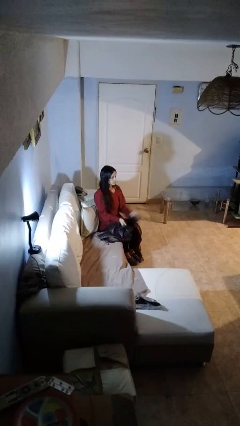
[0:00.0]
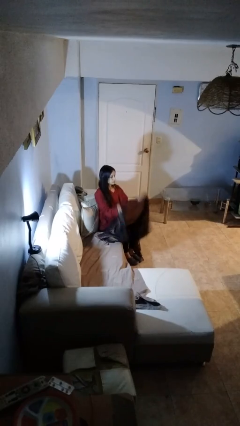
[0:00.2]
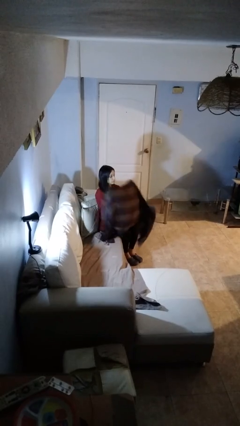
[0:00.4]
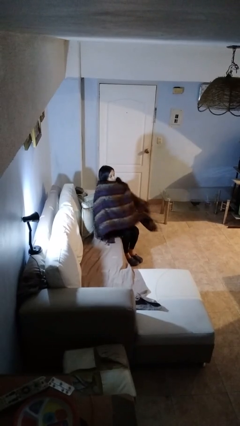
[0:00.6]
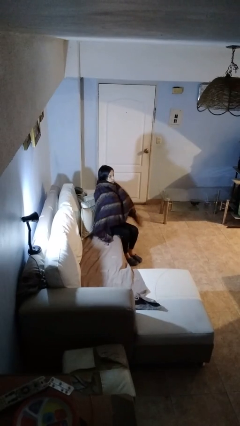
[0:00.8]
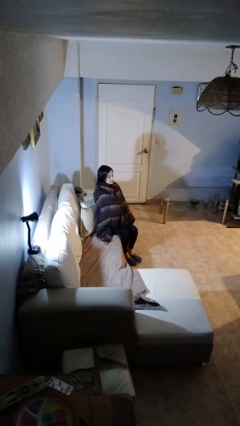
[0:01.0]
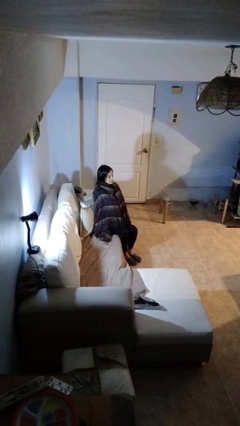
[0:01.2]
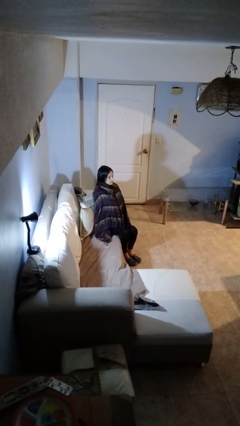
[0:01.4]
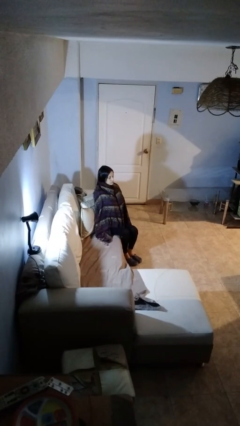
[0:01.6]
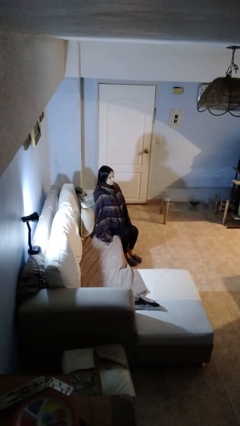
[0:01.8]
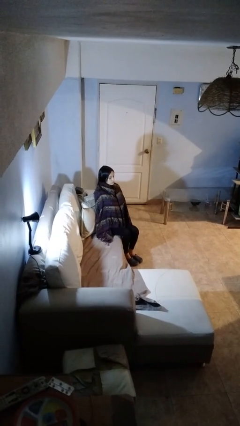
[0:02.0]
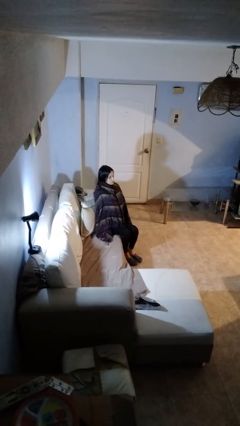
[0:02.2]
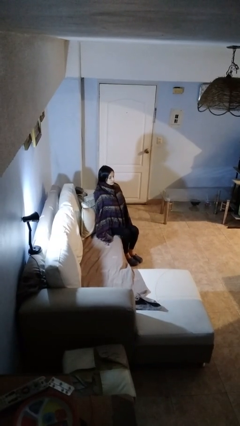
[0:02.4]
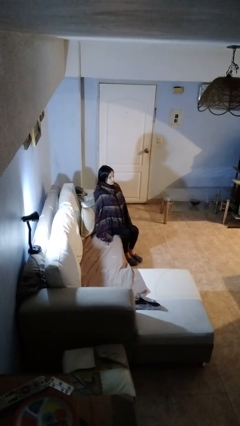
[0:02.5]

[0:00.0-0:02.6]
person covers with blanket

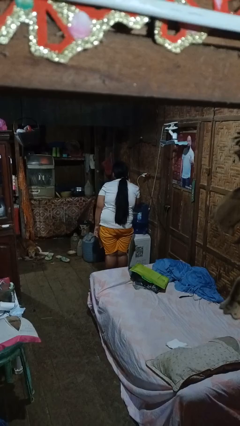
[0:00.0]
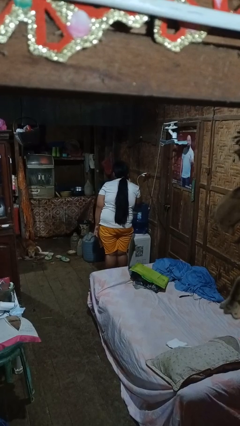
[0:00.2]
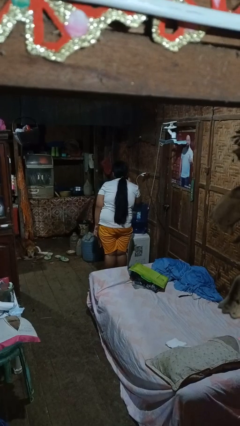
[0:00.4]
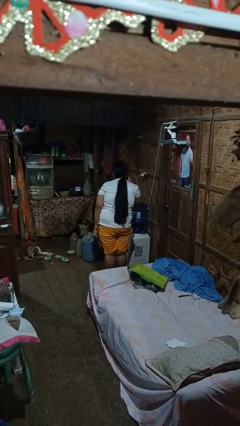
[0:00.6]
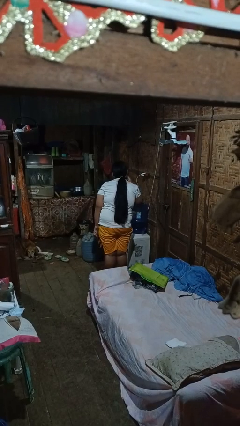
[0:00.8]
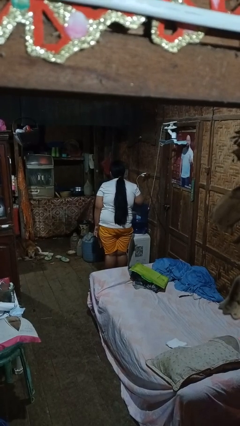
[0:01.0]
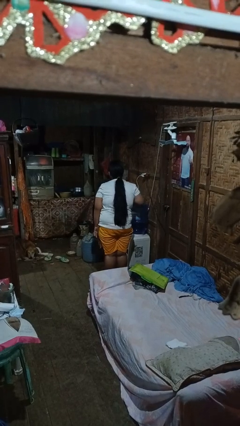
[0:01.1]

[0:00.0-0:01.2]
person gestures listen closely

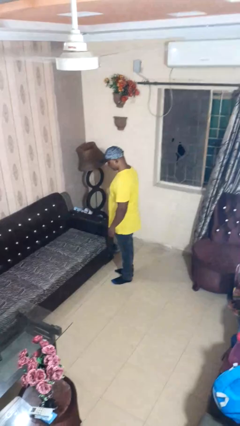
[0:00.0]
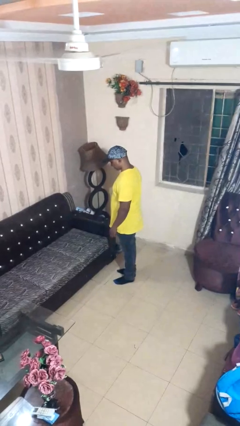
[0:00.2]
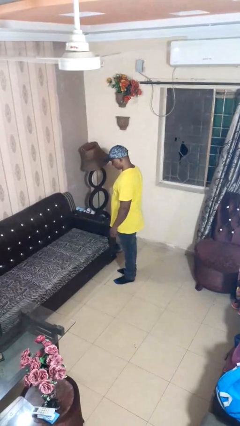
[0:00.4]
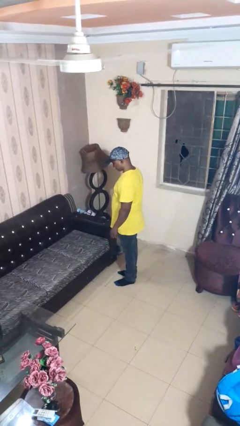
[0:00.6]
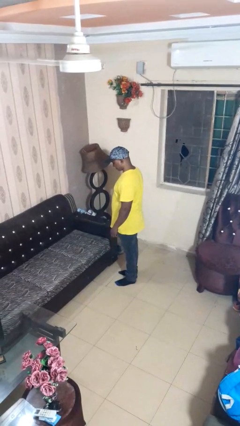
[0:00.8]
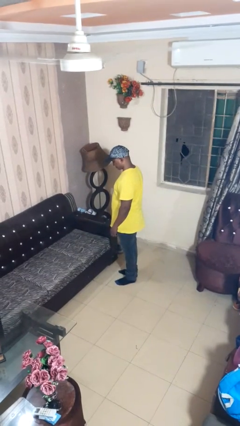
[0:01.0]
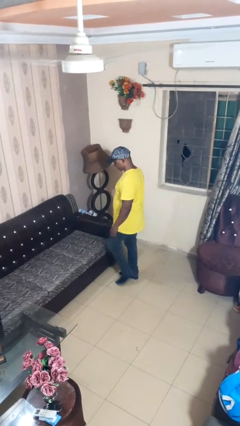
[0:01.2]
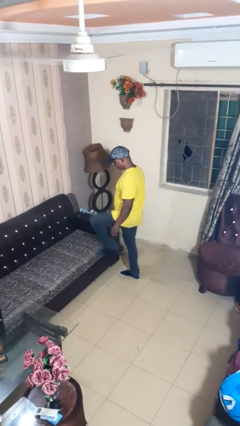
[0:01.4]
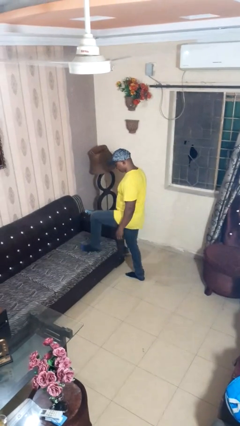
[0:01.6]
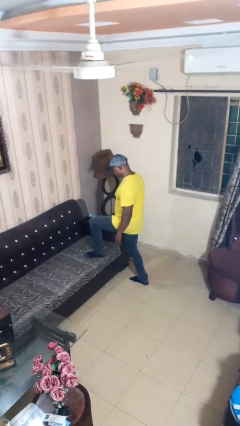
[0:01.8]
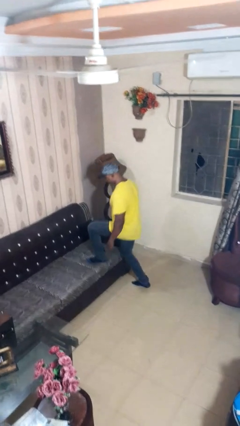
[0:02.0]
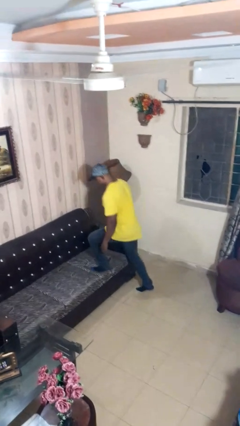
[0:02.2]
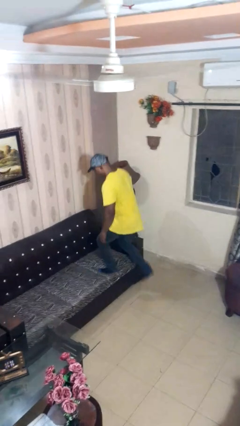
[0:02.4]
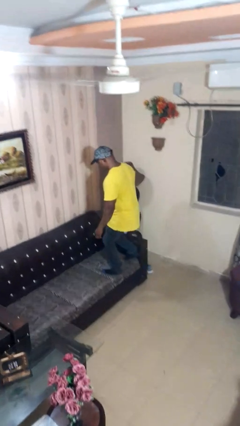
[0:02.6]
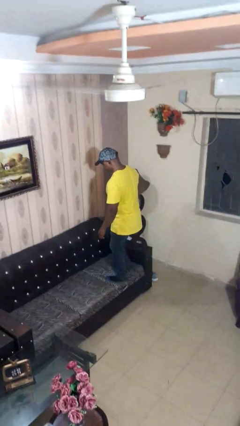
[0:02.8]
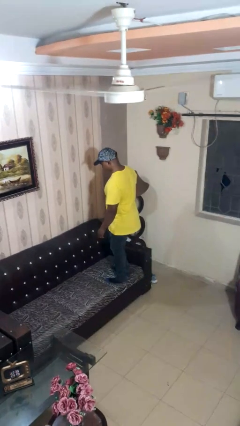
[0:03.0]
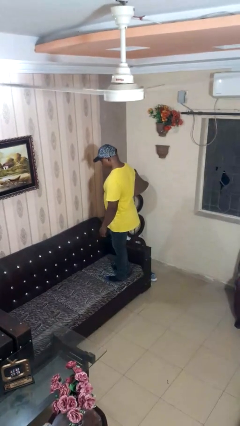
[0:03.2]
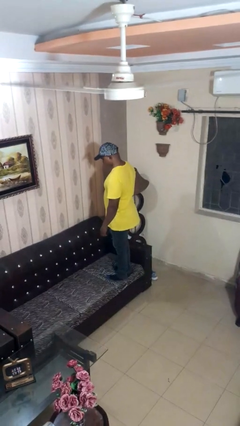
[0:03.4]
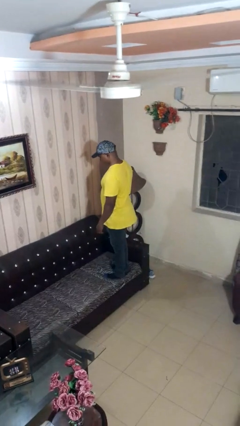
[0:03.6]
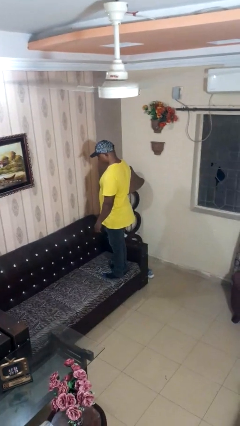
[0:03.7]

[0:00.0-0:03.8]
person climbs on couch

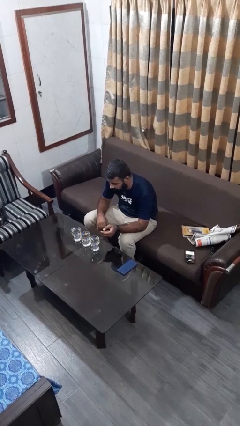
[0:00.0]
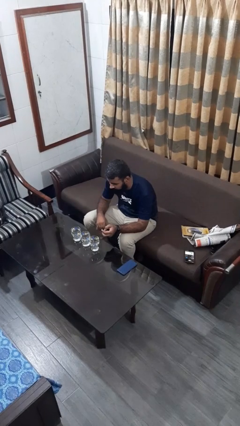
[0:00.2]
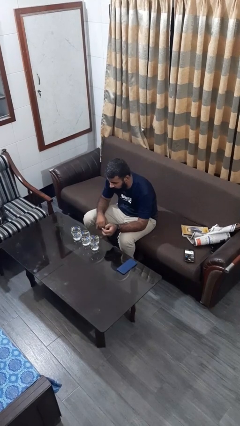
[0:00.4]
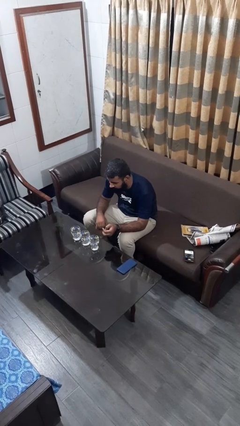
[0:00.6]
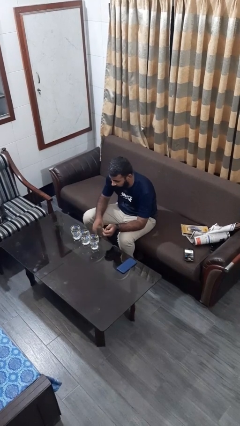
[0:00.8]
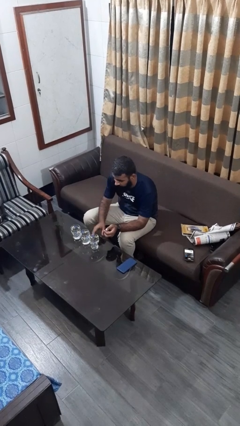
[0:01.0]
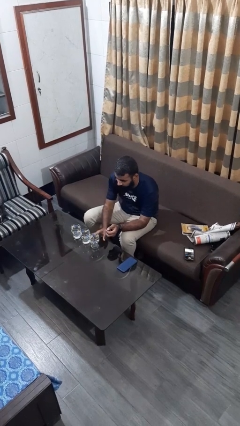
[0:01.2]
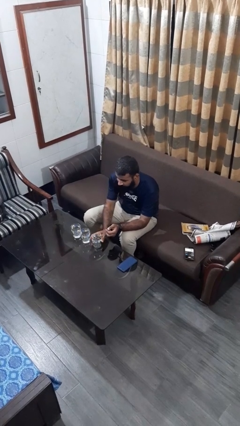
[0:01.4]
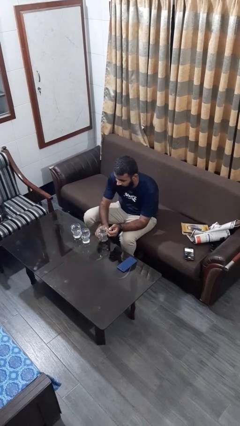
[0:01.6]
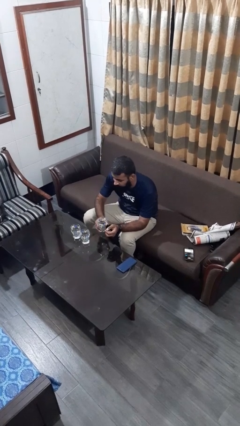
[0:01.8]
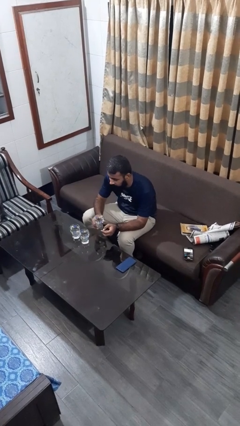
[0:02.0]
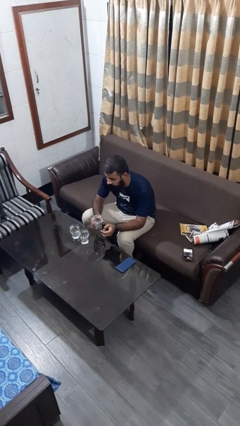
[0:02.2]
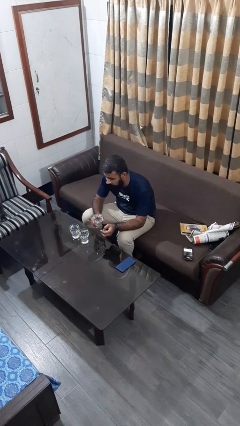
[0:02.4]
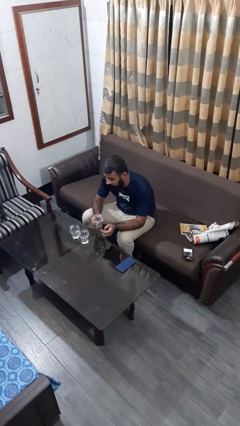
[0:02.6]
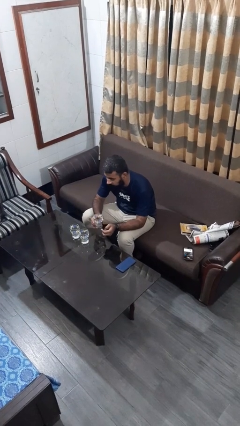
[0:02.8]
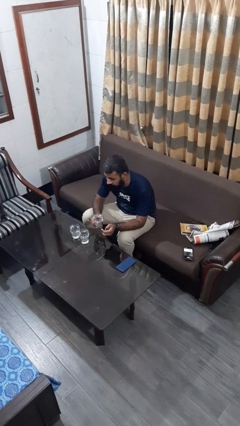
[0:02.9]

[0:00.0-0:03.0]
person picks up object from table

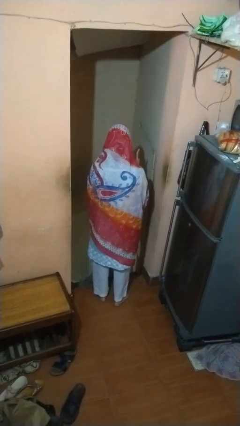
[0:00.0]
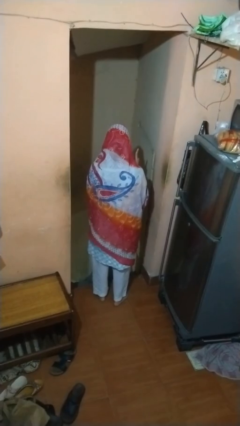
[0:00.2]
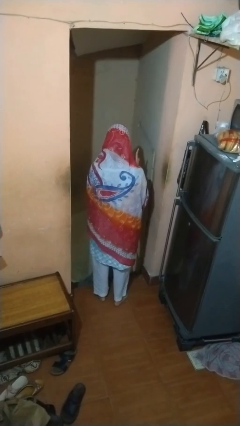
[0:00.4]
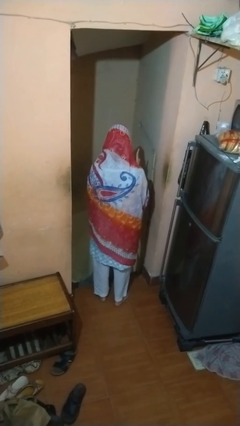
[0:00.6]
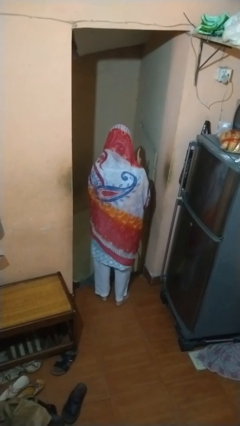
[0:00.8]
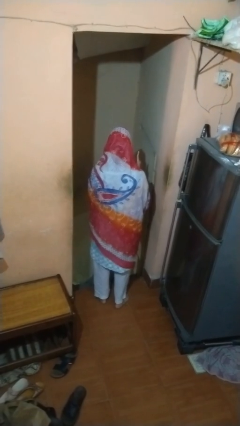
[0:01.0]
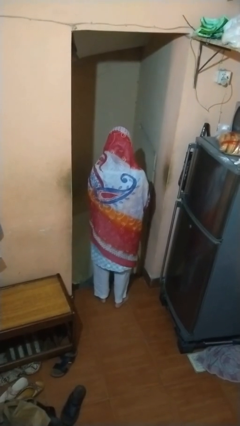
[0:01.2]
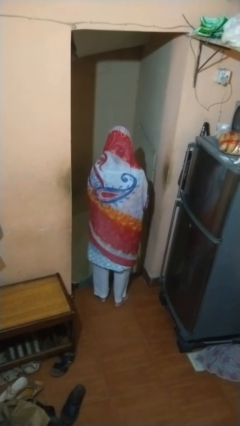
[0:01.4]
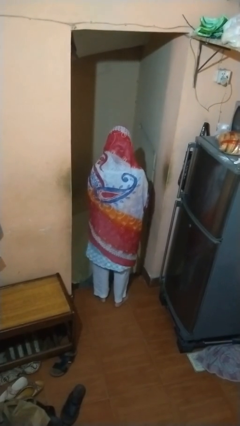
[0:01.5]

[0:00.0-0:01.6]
person gestures number one

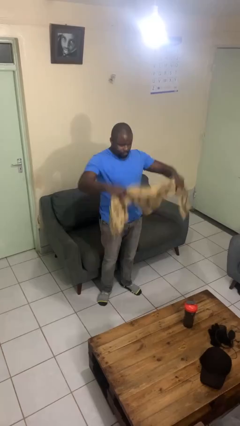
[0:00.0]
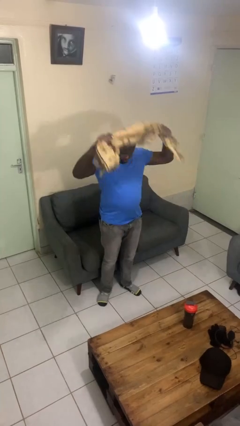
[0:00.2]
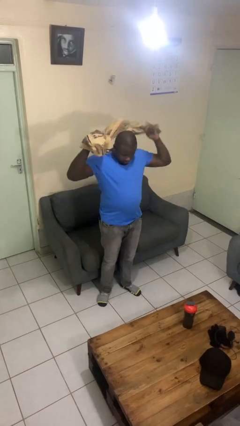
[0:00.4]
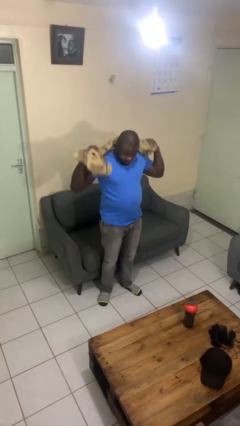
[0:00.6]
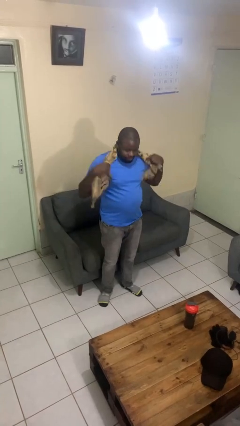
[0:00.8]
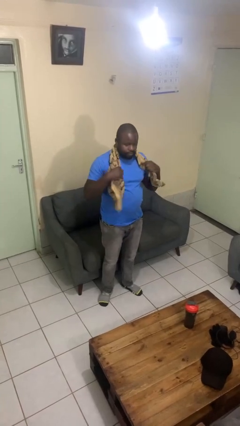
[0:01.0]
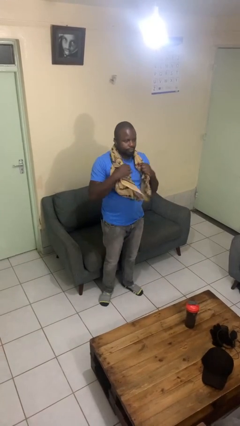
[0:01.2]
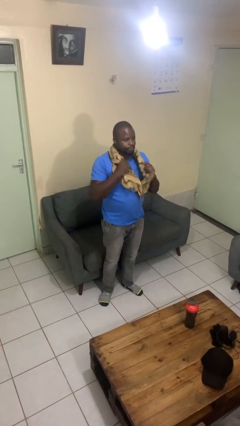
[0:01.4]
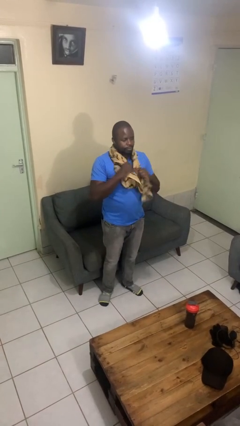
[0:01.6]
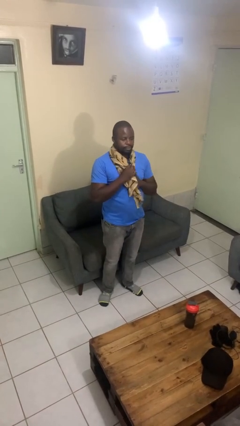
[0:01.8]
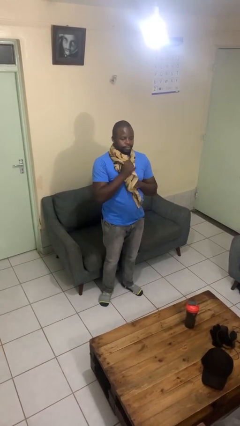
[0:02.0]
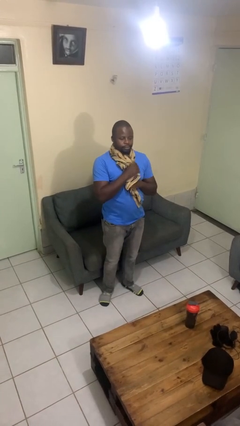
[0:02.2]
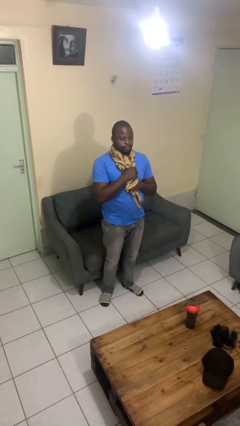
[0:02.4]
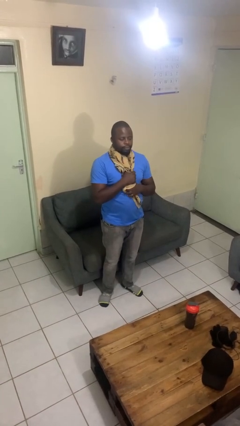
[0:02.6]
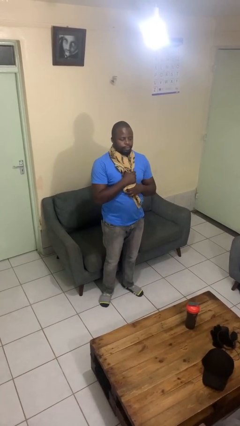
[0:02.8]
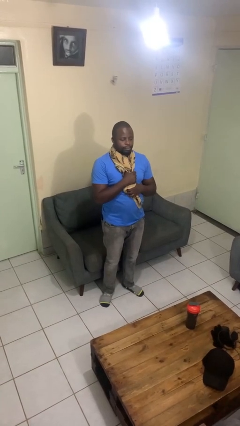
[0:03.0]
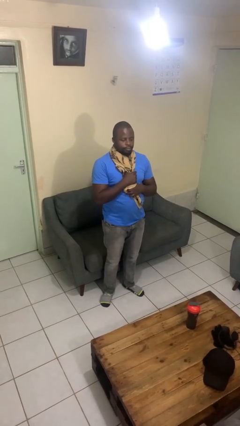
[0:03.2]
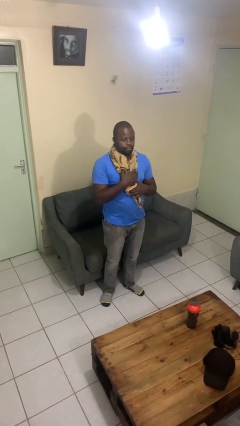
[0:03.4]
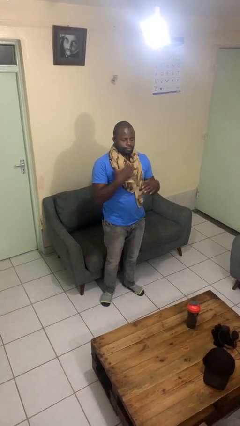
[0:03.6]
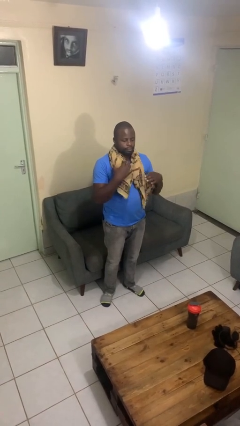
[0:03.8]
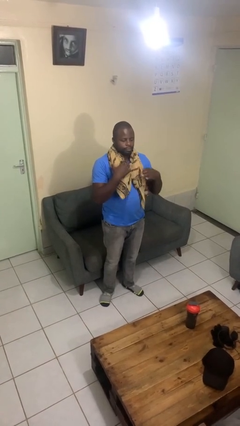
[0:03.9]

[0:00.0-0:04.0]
person puts on scarf

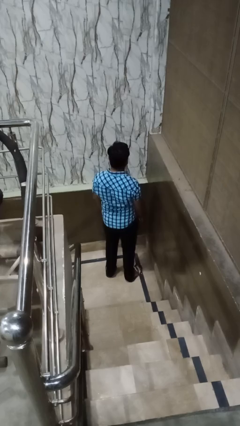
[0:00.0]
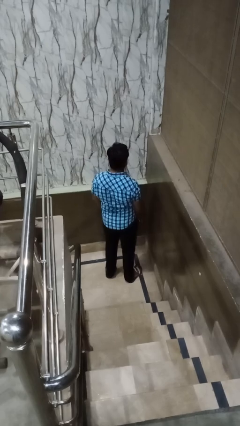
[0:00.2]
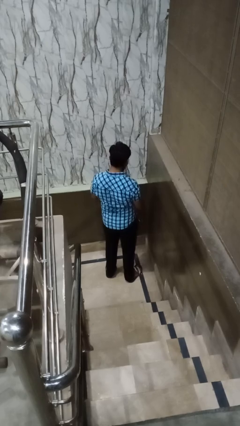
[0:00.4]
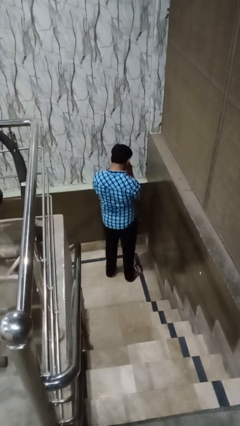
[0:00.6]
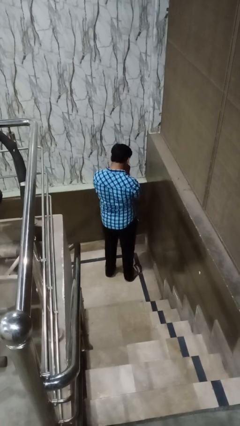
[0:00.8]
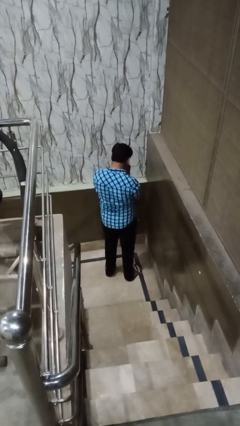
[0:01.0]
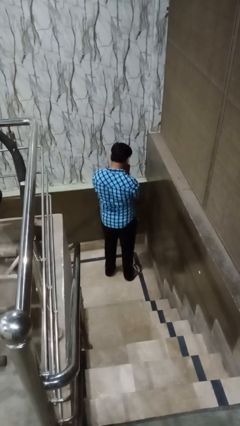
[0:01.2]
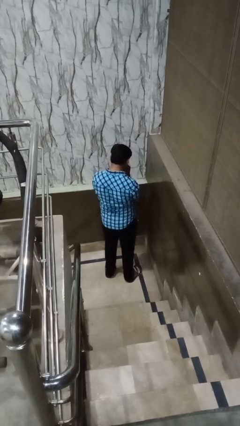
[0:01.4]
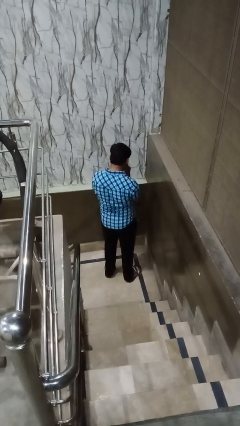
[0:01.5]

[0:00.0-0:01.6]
person sneezes into hand
